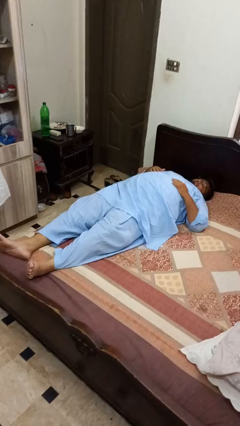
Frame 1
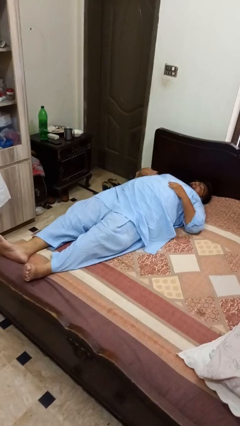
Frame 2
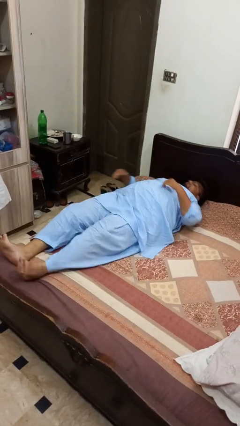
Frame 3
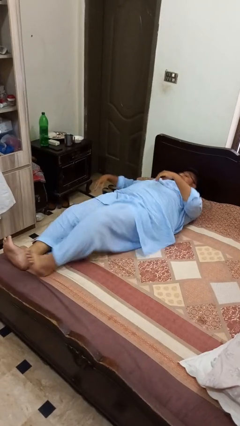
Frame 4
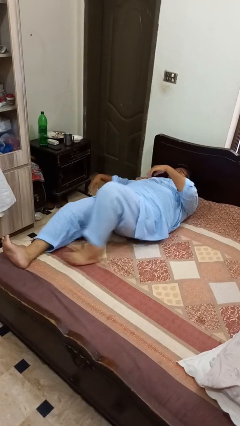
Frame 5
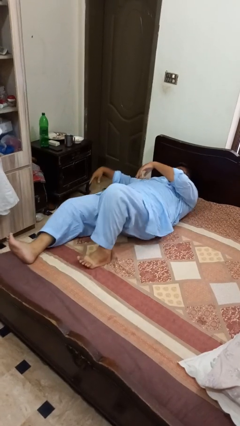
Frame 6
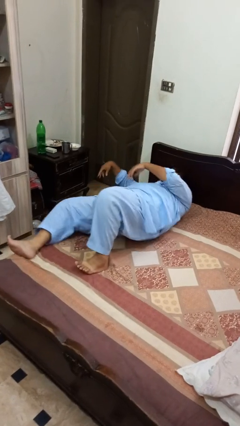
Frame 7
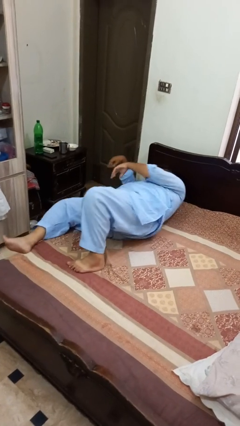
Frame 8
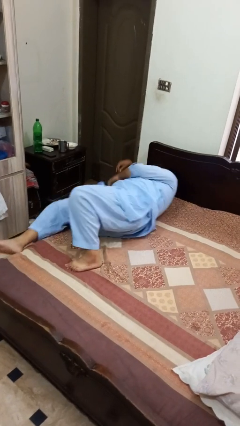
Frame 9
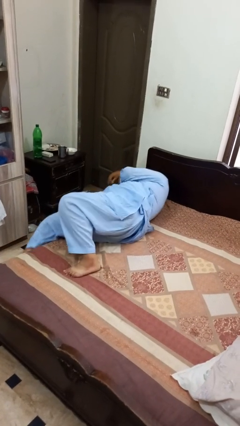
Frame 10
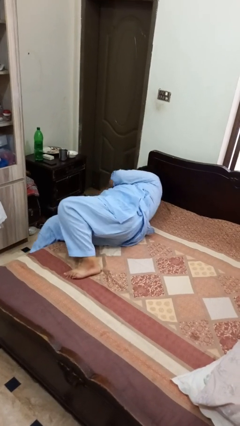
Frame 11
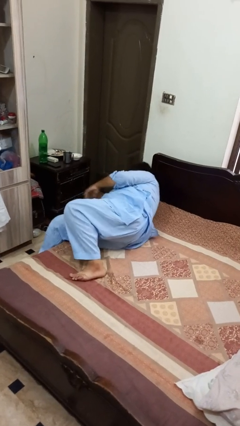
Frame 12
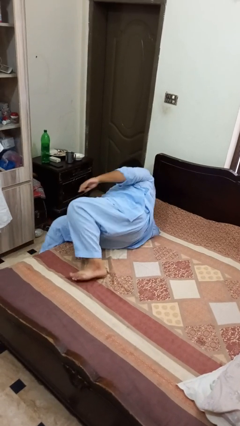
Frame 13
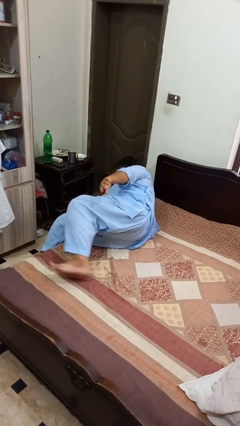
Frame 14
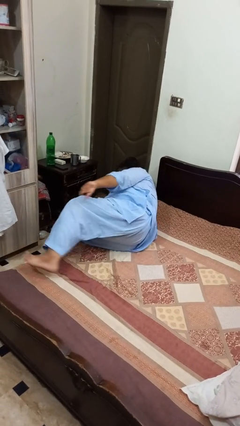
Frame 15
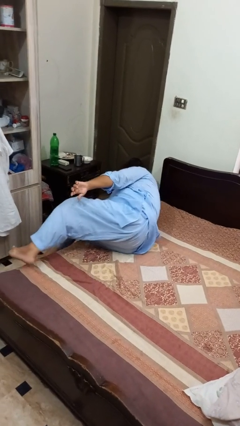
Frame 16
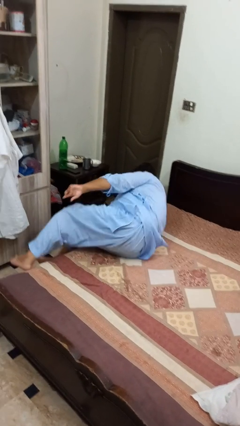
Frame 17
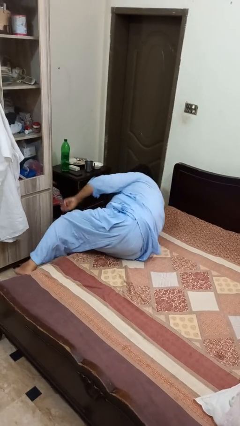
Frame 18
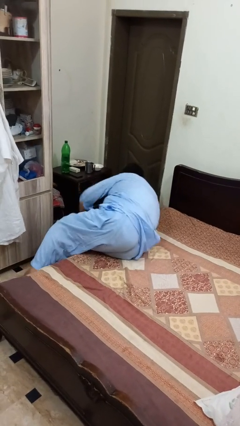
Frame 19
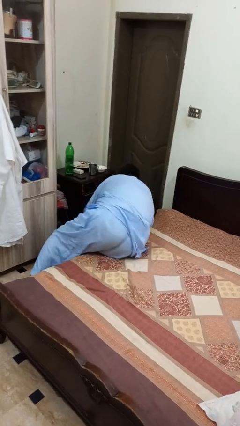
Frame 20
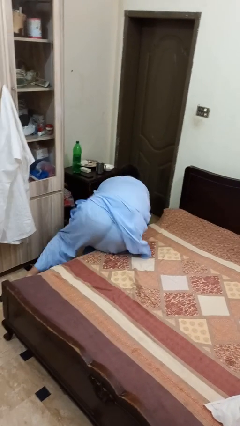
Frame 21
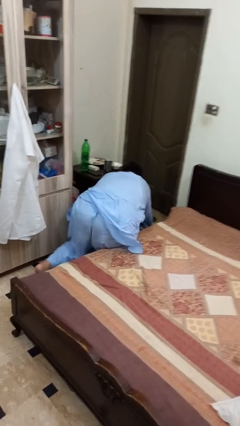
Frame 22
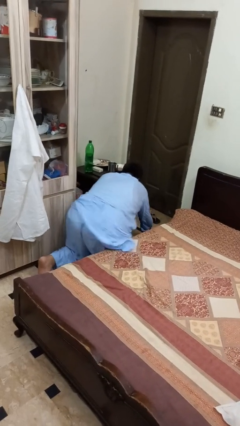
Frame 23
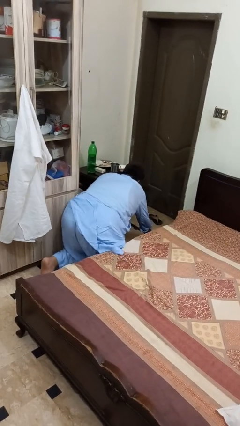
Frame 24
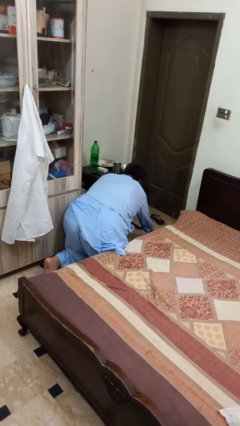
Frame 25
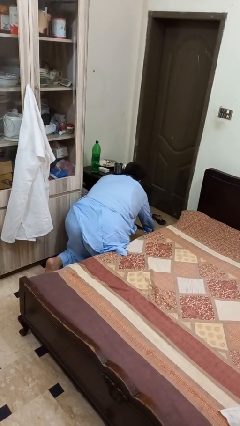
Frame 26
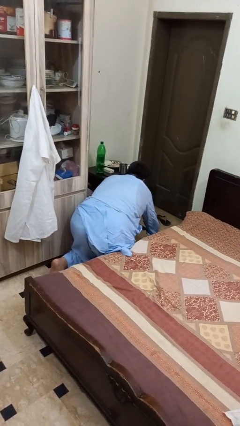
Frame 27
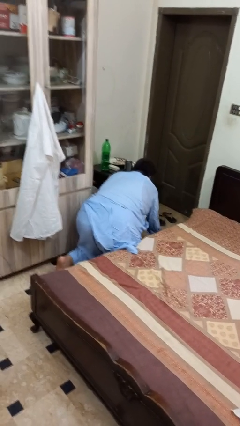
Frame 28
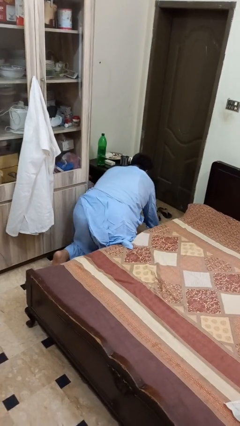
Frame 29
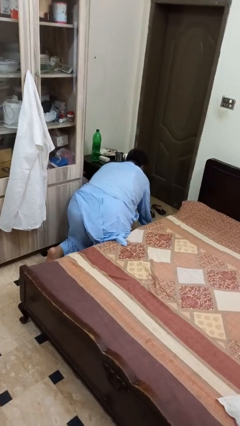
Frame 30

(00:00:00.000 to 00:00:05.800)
person falls from bed

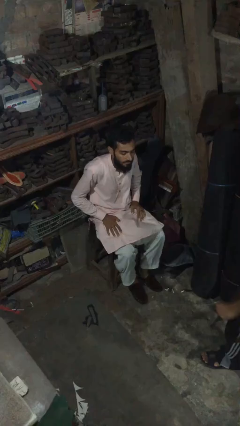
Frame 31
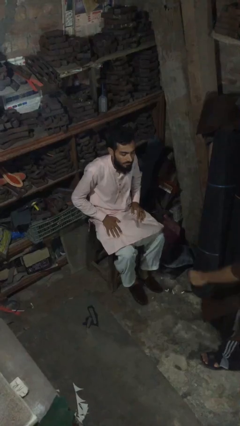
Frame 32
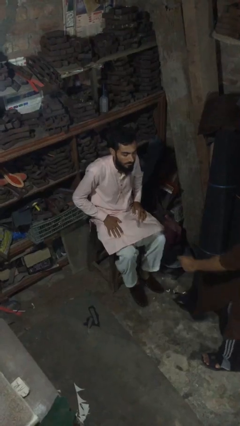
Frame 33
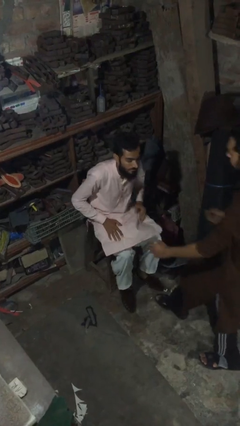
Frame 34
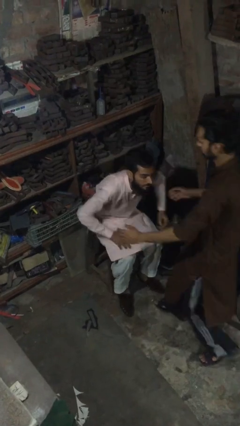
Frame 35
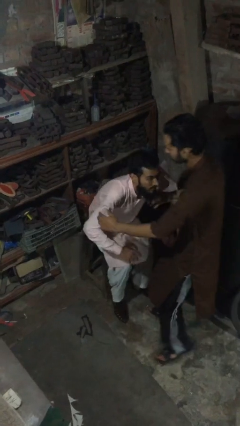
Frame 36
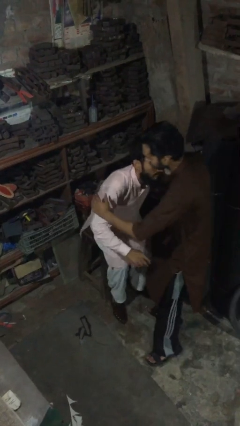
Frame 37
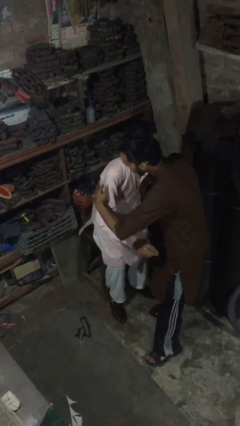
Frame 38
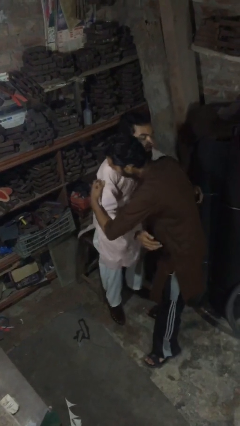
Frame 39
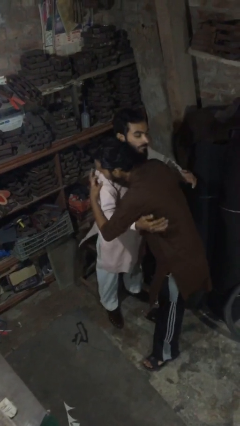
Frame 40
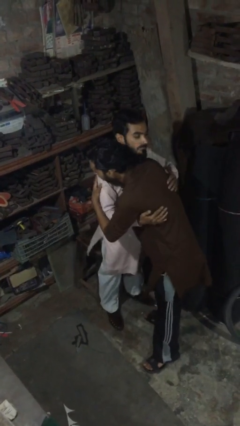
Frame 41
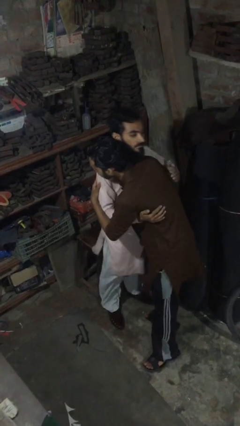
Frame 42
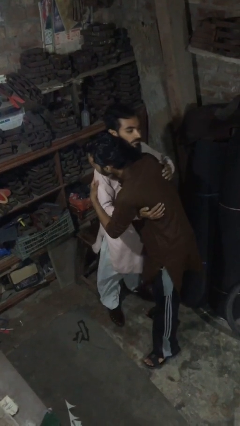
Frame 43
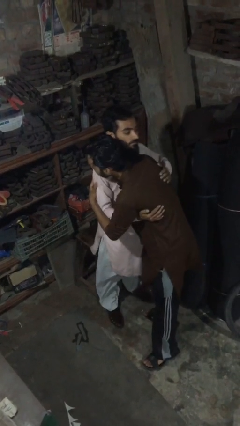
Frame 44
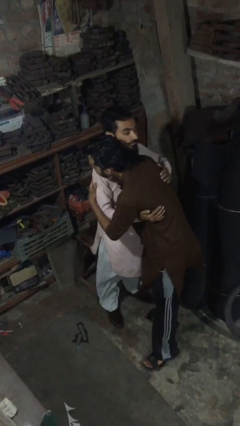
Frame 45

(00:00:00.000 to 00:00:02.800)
person embraces person

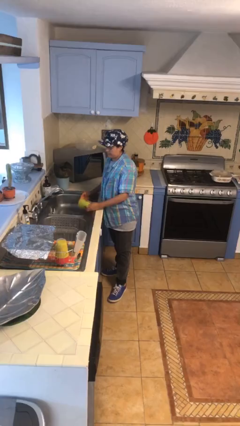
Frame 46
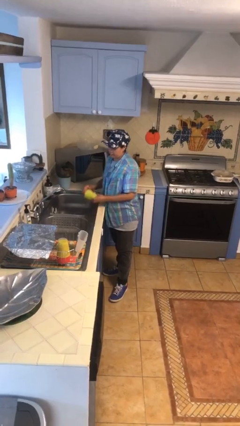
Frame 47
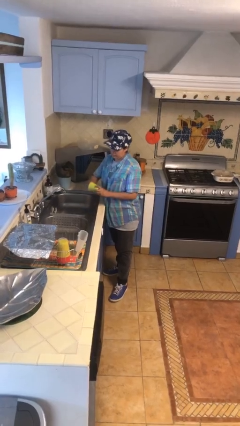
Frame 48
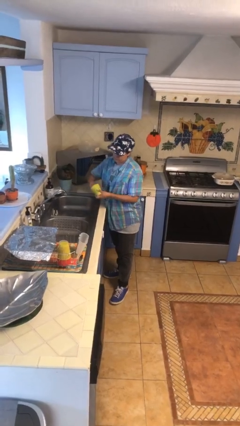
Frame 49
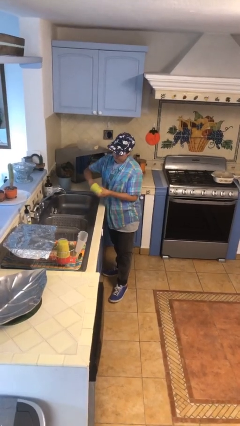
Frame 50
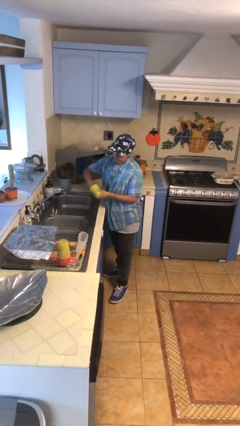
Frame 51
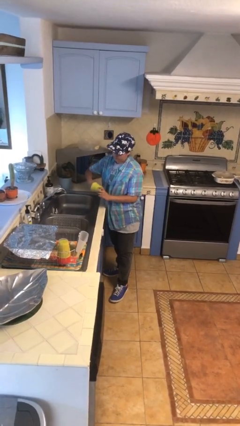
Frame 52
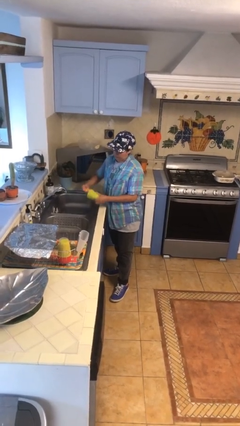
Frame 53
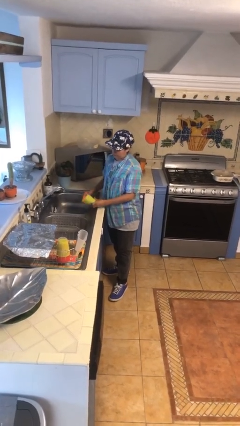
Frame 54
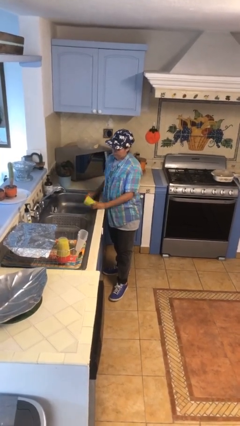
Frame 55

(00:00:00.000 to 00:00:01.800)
person washes dish

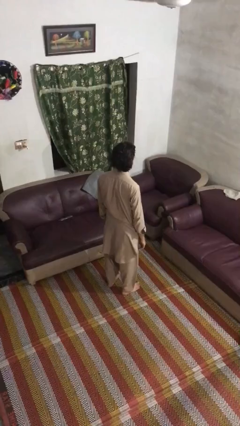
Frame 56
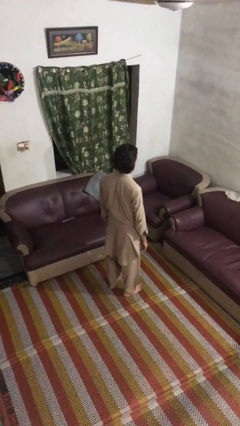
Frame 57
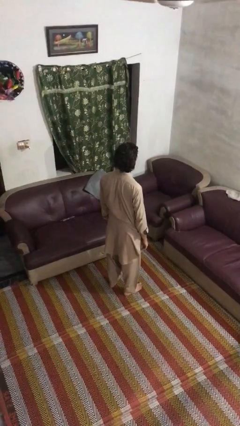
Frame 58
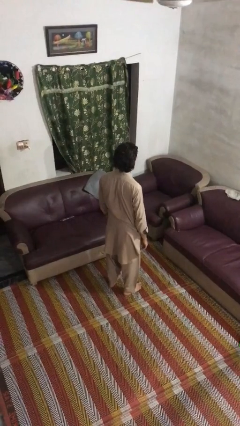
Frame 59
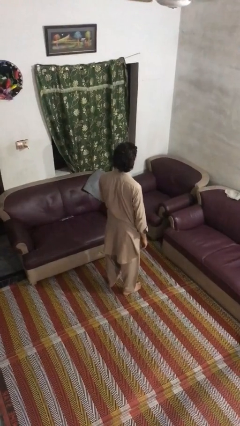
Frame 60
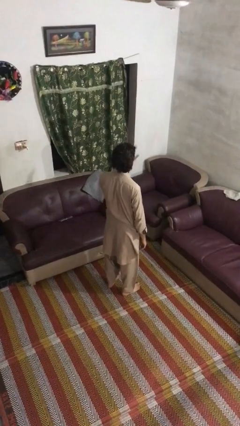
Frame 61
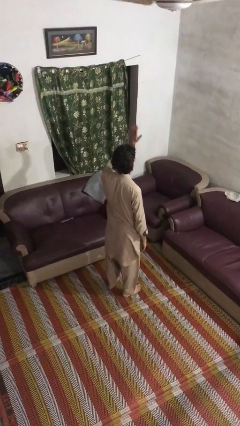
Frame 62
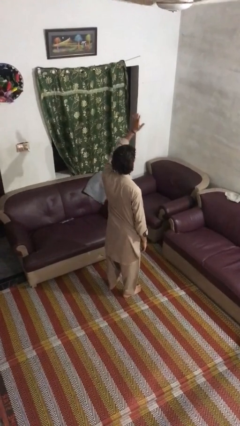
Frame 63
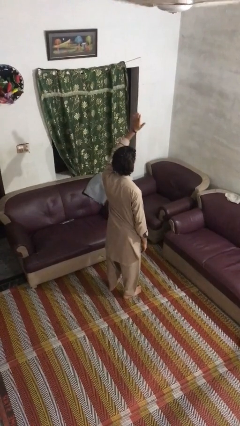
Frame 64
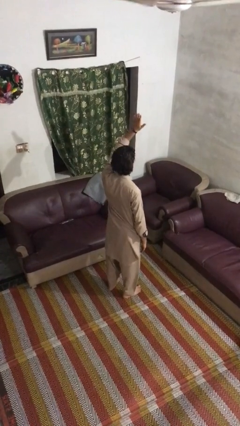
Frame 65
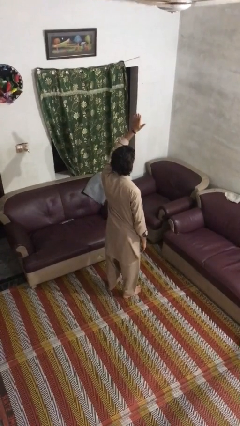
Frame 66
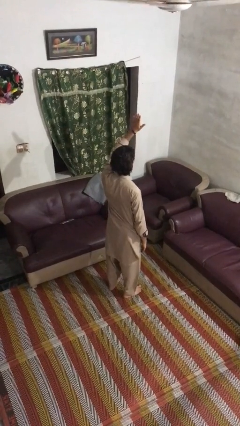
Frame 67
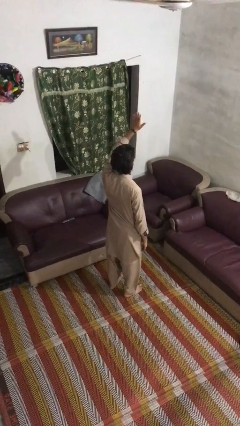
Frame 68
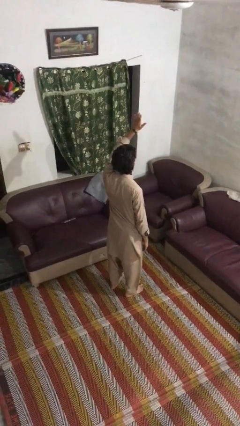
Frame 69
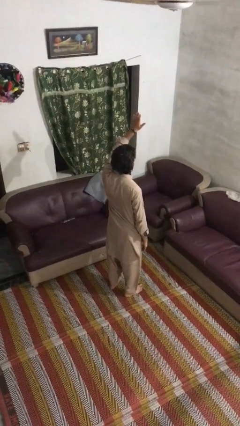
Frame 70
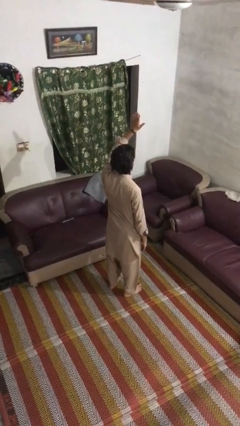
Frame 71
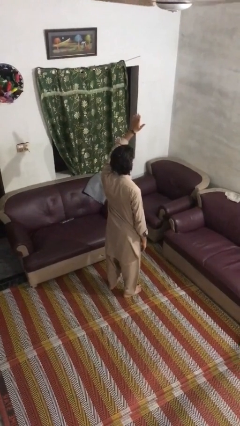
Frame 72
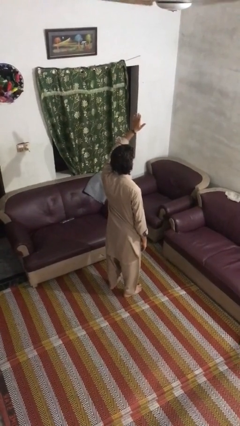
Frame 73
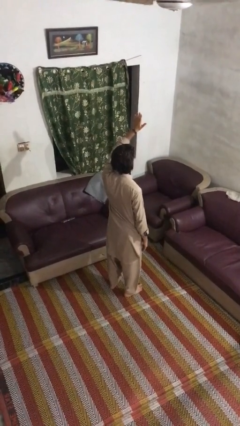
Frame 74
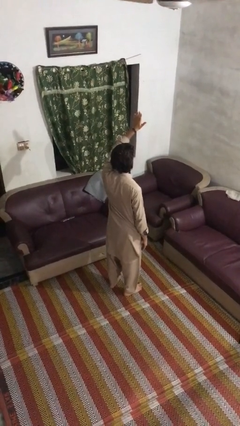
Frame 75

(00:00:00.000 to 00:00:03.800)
person gestures raise hand

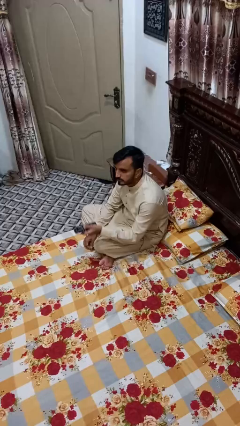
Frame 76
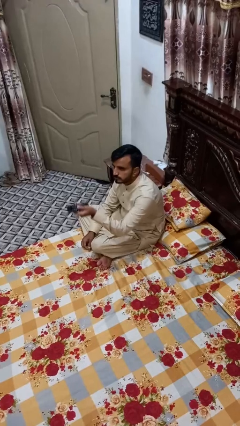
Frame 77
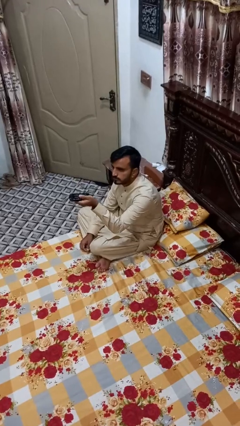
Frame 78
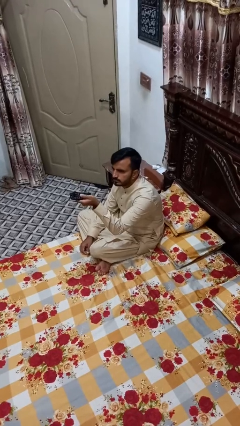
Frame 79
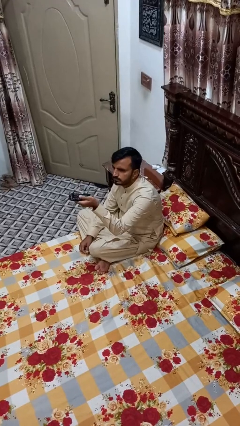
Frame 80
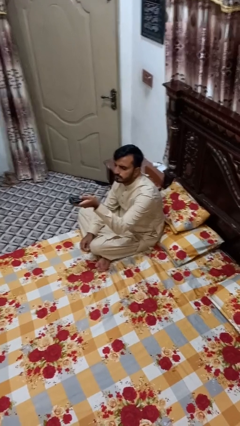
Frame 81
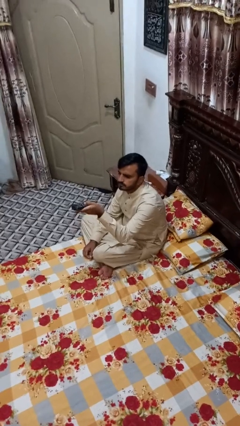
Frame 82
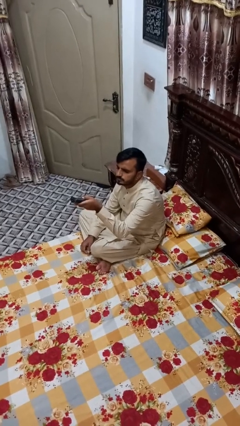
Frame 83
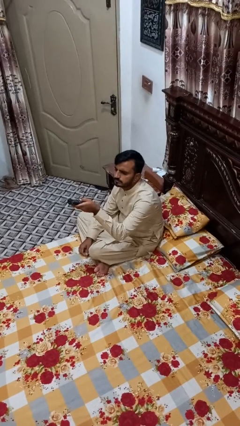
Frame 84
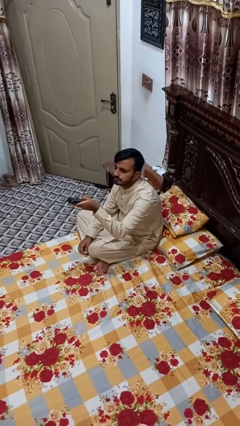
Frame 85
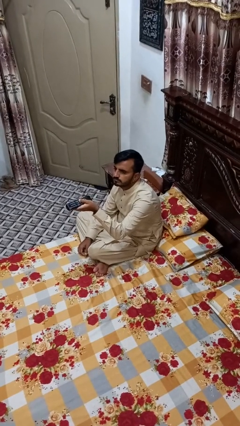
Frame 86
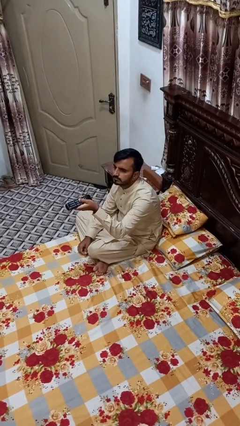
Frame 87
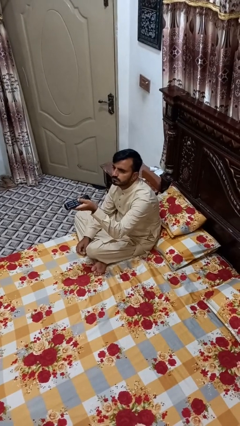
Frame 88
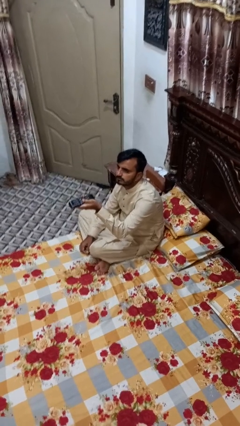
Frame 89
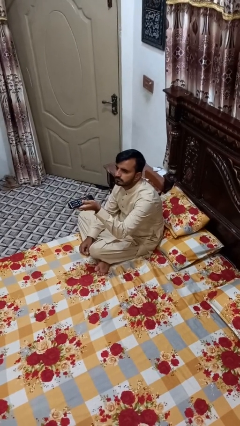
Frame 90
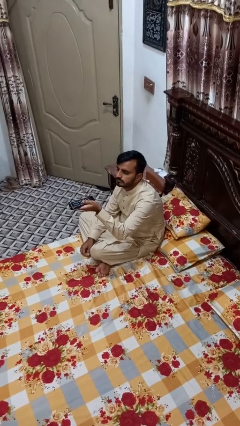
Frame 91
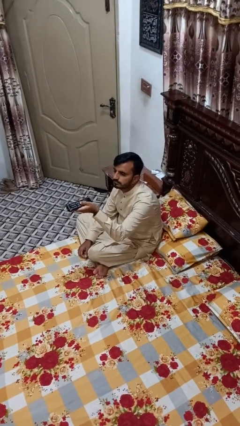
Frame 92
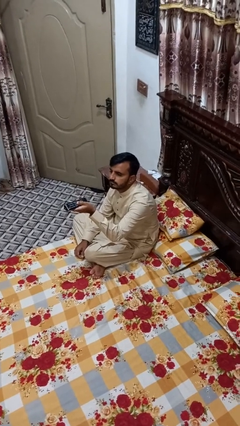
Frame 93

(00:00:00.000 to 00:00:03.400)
person uses television remote

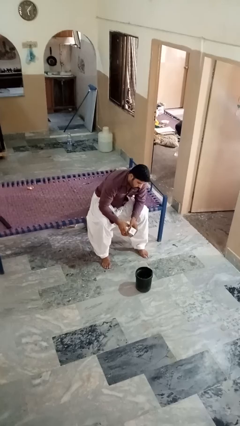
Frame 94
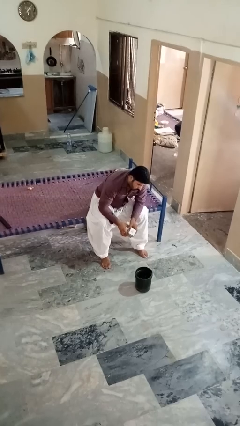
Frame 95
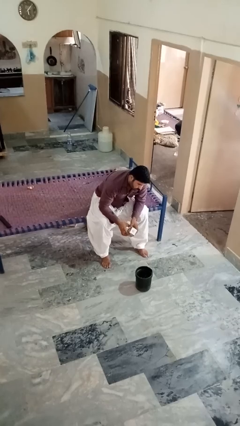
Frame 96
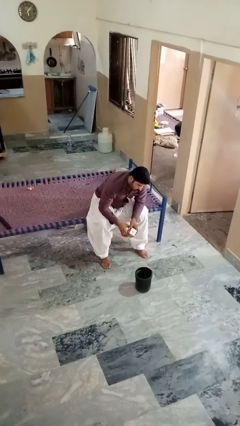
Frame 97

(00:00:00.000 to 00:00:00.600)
person takes object from basket
